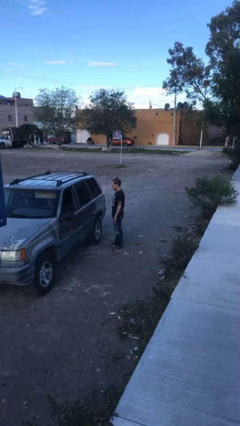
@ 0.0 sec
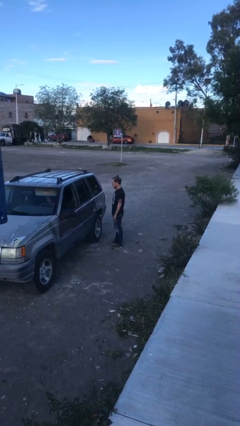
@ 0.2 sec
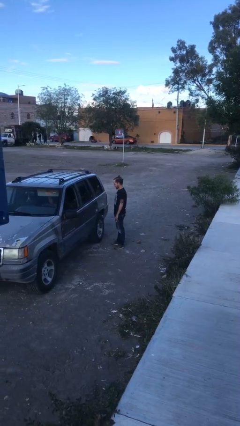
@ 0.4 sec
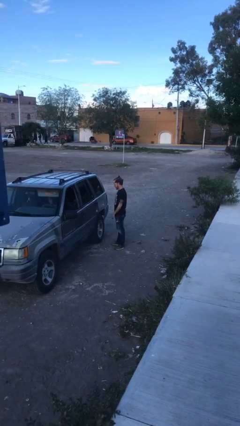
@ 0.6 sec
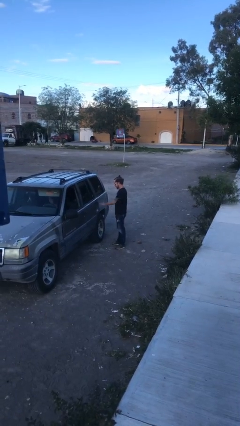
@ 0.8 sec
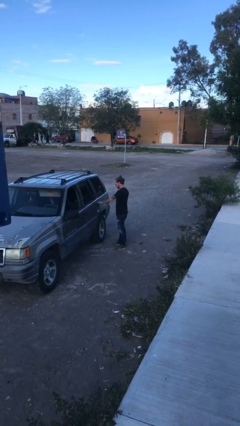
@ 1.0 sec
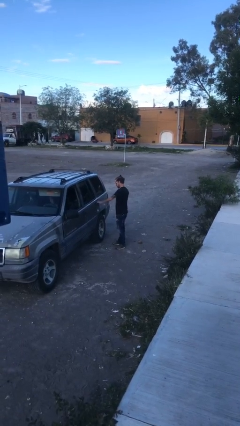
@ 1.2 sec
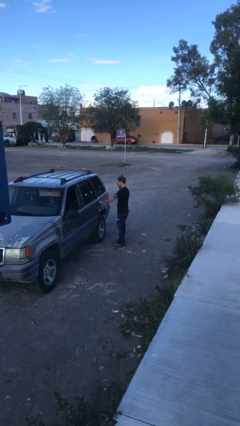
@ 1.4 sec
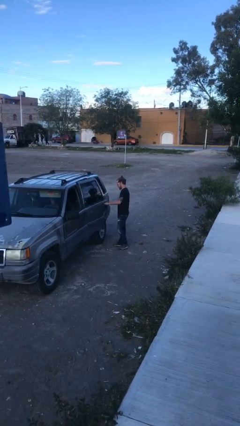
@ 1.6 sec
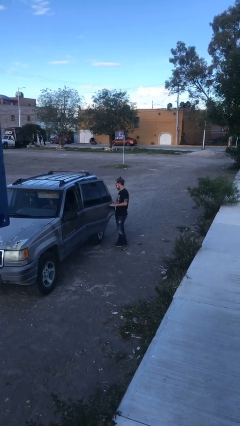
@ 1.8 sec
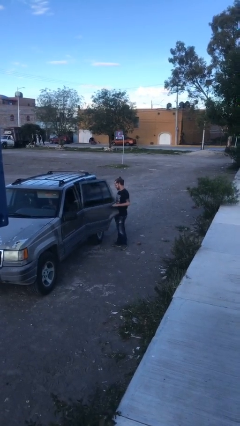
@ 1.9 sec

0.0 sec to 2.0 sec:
person opens car door

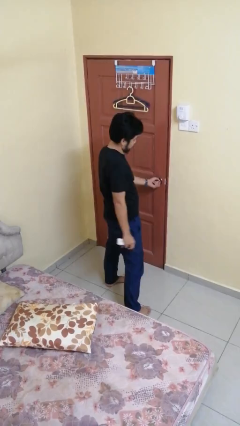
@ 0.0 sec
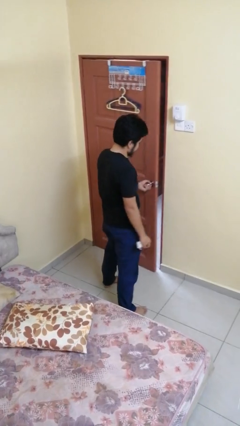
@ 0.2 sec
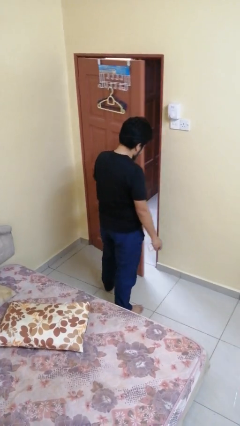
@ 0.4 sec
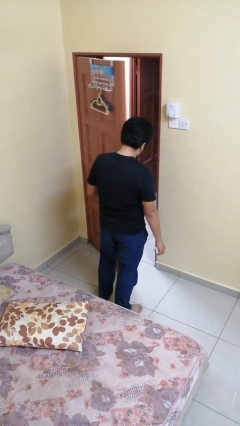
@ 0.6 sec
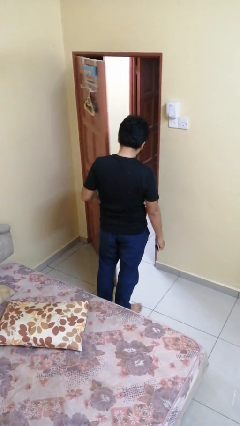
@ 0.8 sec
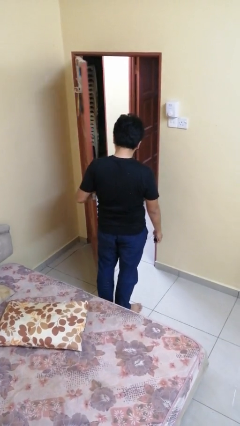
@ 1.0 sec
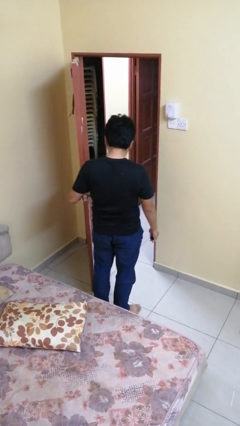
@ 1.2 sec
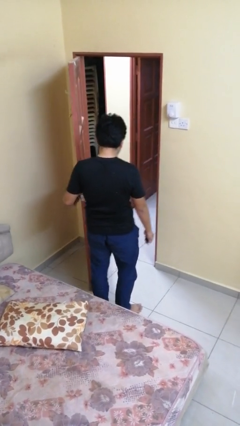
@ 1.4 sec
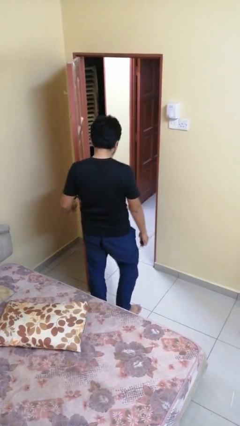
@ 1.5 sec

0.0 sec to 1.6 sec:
person opens facility door

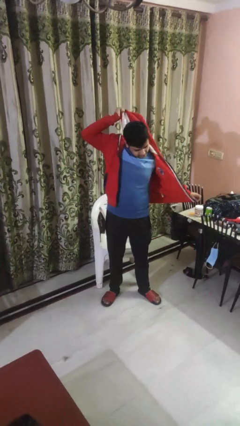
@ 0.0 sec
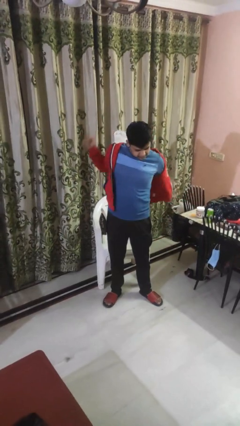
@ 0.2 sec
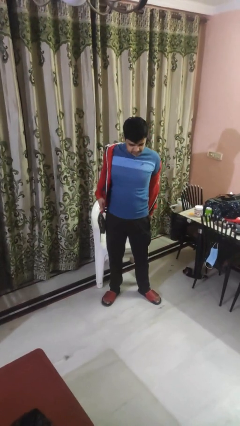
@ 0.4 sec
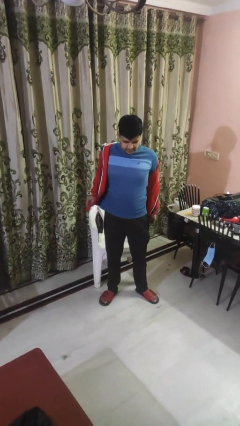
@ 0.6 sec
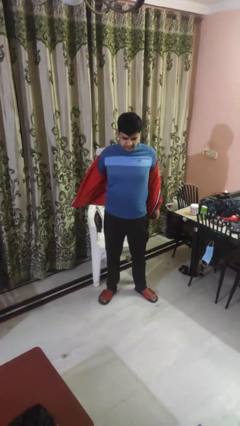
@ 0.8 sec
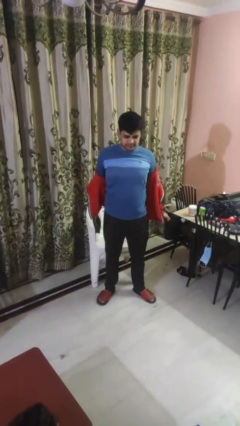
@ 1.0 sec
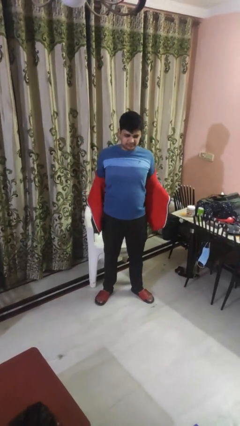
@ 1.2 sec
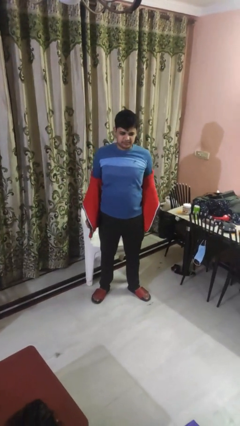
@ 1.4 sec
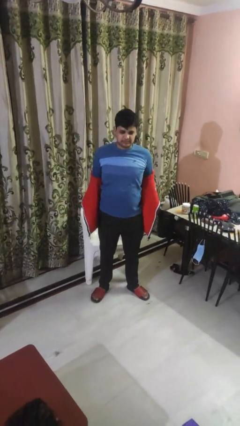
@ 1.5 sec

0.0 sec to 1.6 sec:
person takes off hoodie

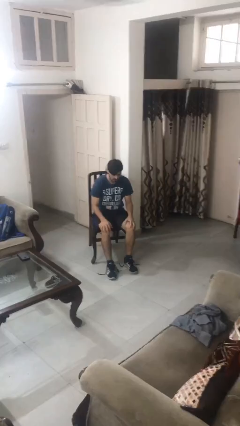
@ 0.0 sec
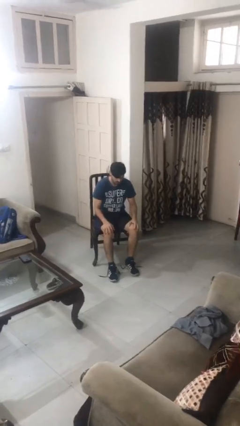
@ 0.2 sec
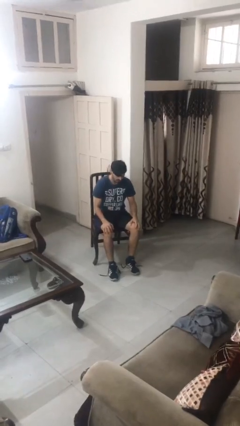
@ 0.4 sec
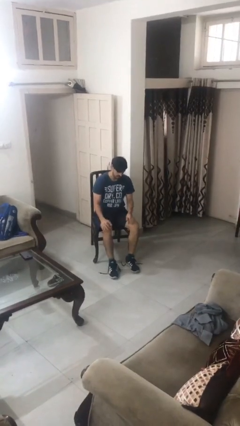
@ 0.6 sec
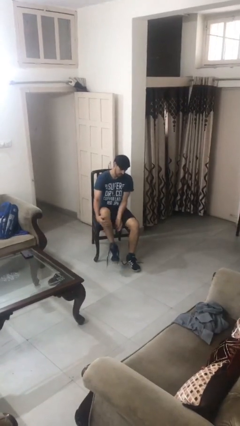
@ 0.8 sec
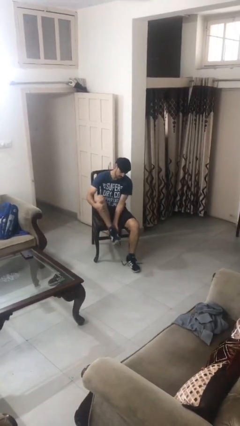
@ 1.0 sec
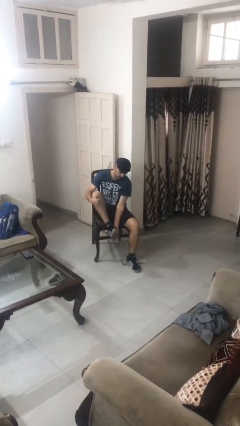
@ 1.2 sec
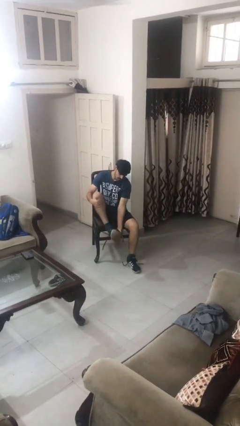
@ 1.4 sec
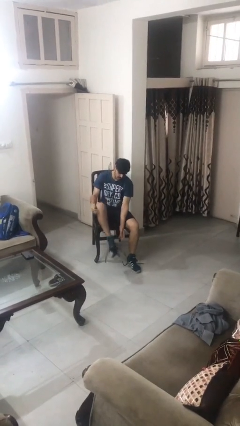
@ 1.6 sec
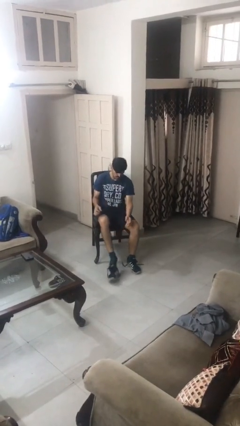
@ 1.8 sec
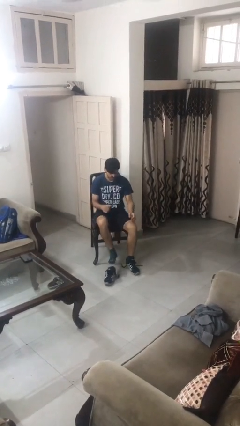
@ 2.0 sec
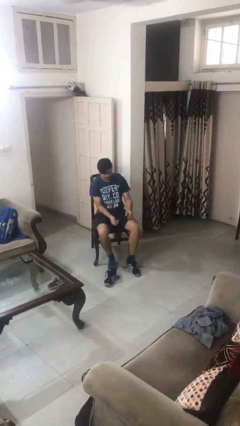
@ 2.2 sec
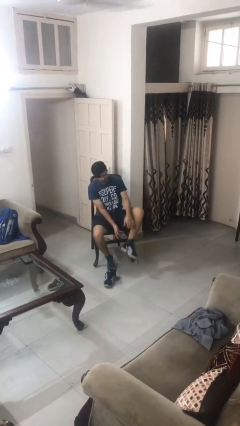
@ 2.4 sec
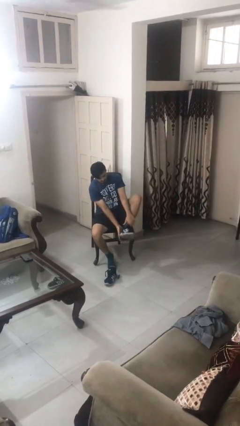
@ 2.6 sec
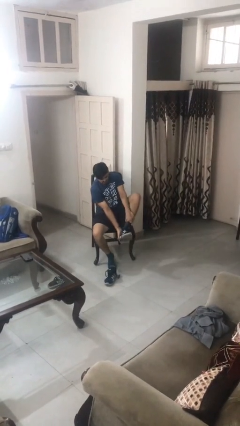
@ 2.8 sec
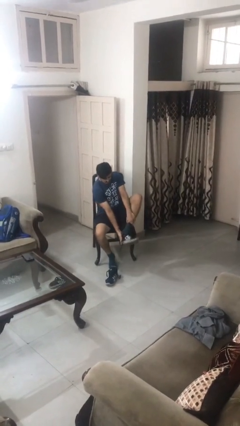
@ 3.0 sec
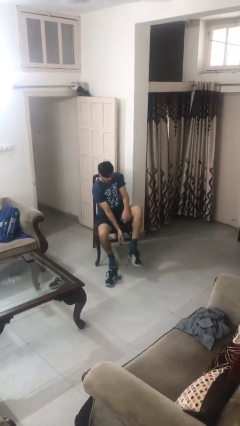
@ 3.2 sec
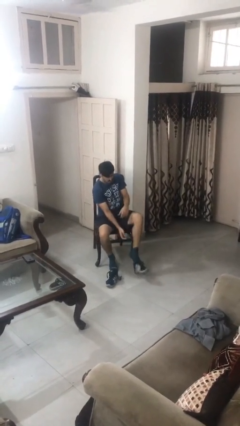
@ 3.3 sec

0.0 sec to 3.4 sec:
person takes off shoes

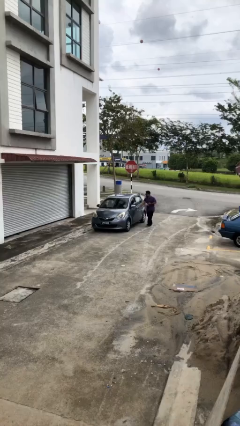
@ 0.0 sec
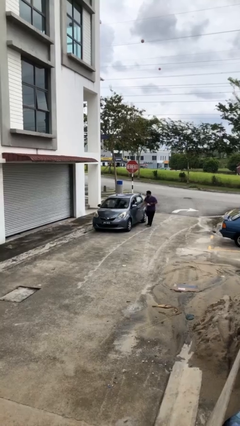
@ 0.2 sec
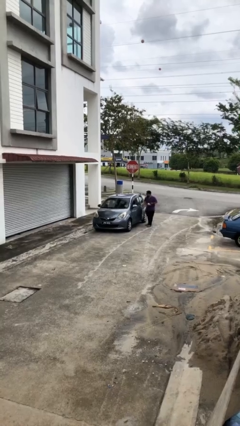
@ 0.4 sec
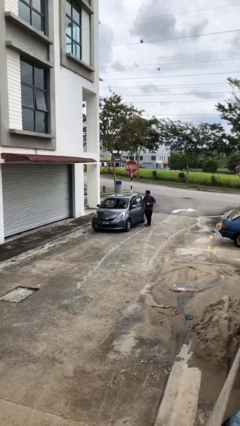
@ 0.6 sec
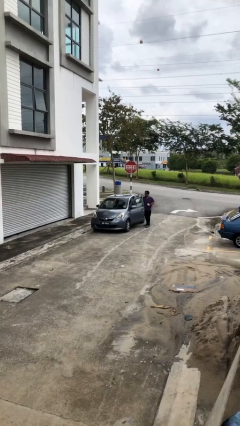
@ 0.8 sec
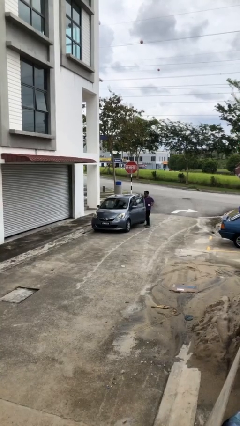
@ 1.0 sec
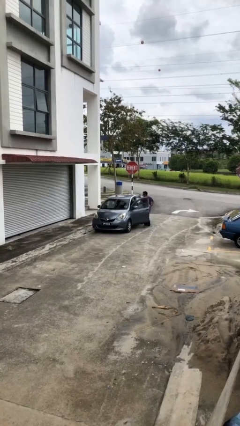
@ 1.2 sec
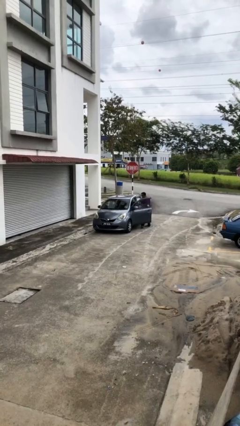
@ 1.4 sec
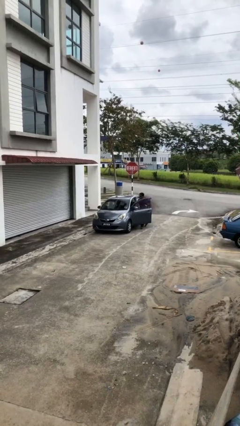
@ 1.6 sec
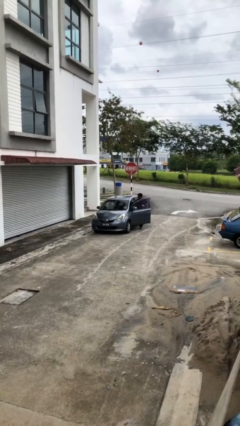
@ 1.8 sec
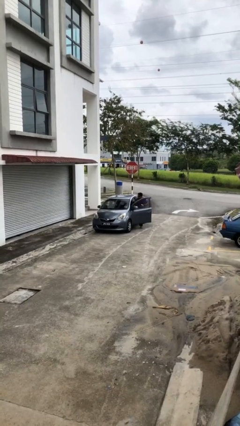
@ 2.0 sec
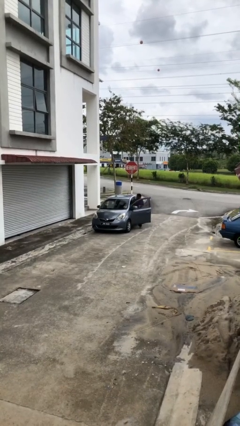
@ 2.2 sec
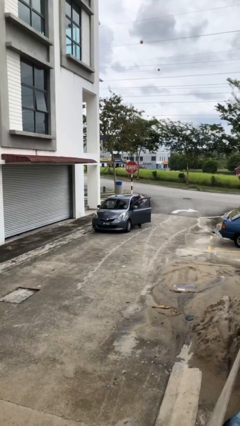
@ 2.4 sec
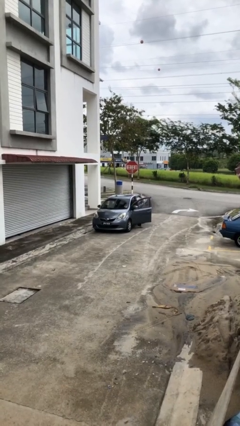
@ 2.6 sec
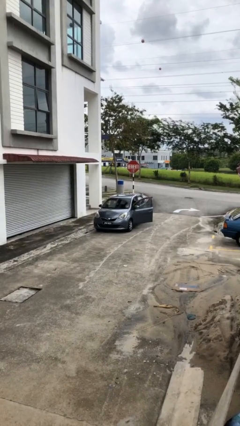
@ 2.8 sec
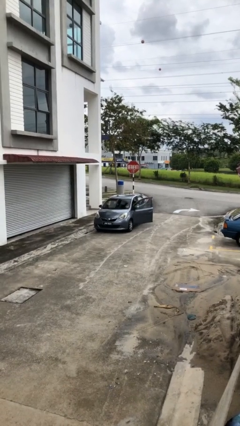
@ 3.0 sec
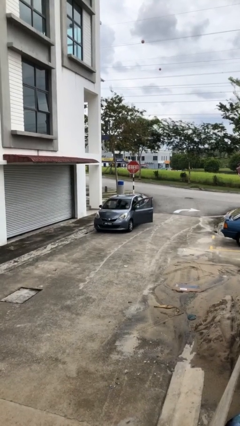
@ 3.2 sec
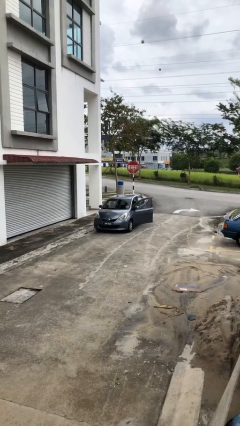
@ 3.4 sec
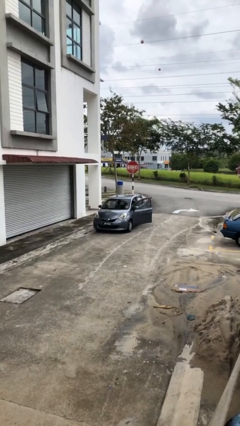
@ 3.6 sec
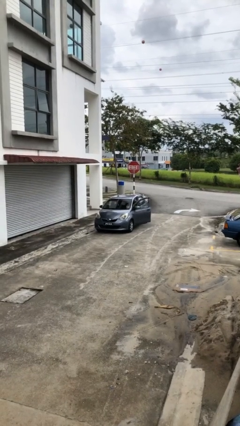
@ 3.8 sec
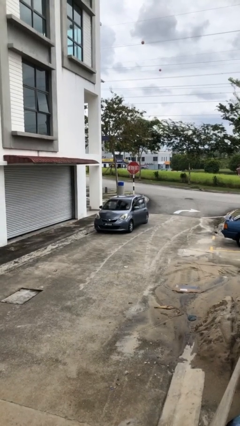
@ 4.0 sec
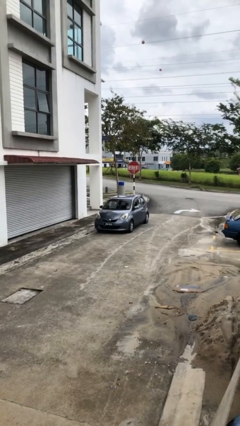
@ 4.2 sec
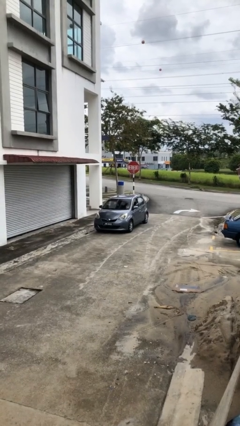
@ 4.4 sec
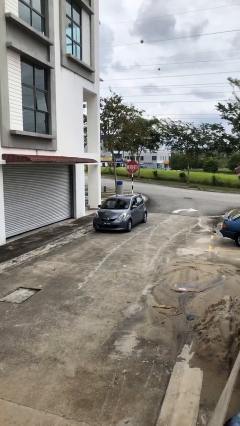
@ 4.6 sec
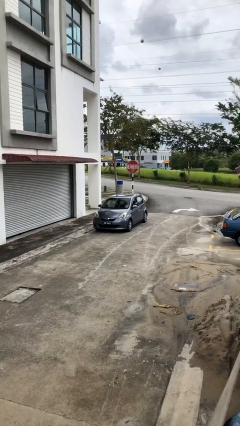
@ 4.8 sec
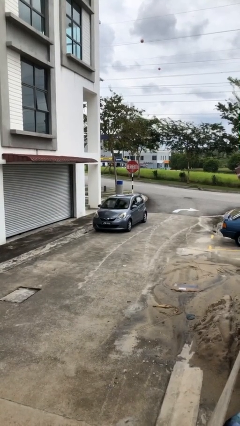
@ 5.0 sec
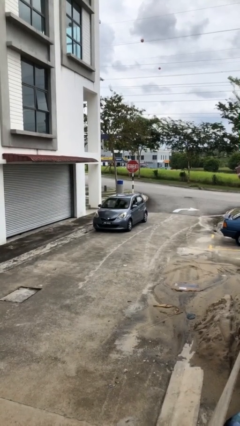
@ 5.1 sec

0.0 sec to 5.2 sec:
car picks up person

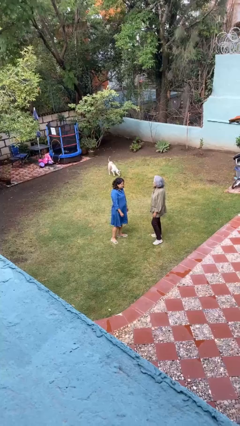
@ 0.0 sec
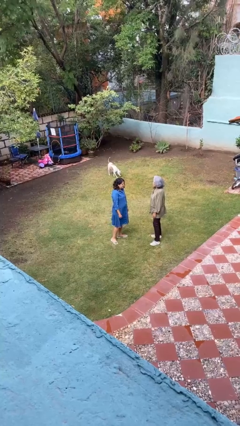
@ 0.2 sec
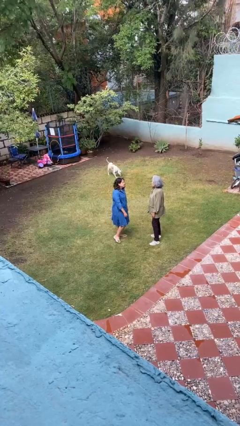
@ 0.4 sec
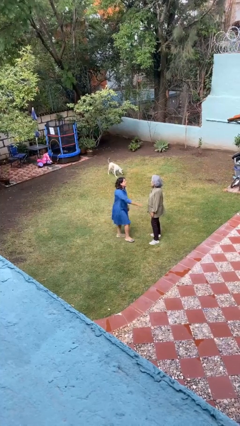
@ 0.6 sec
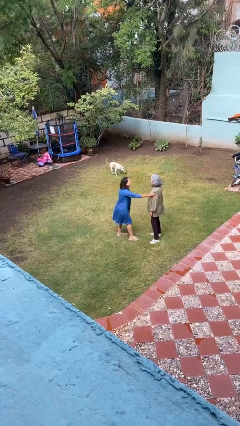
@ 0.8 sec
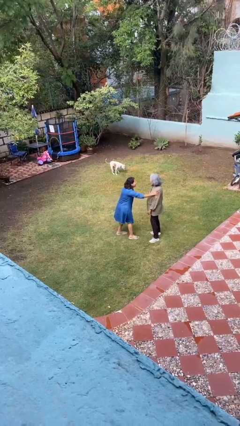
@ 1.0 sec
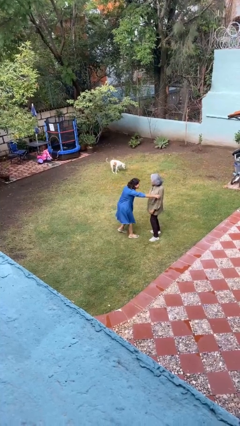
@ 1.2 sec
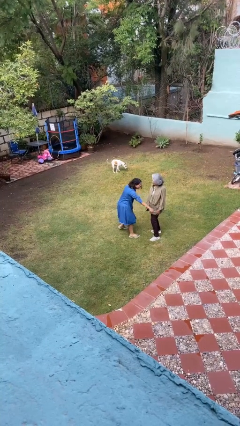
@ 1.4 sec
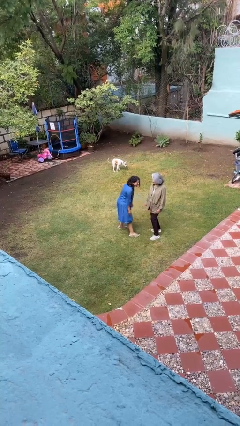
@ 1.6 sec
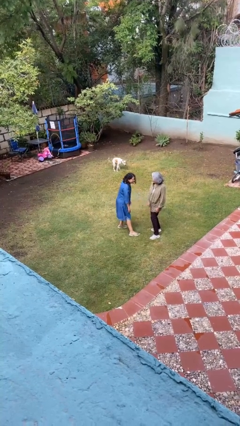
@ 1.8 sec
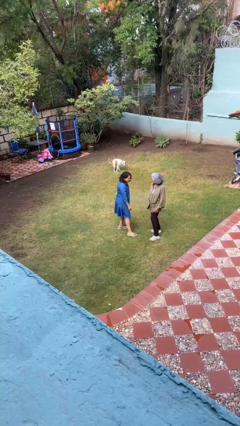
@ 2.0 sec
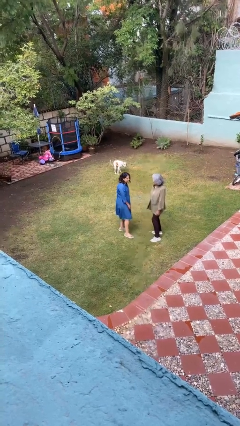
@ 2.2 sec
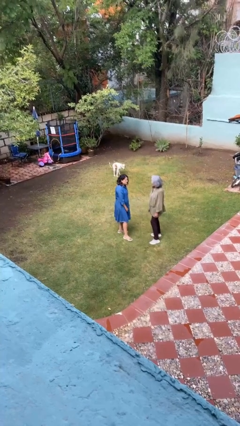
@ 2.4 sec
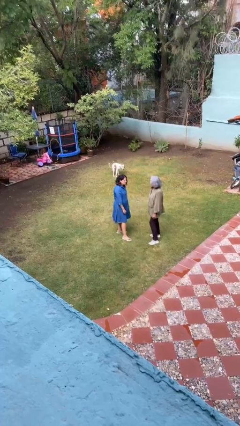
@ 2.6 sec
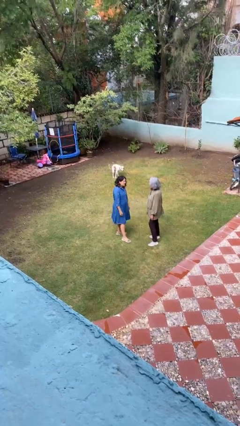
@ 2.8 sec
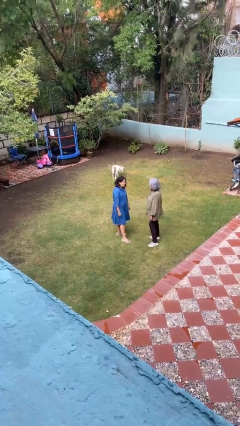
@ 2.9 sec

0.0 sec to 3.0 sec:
person shoves person
